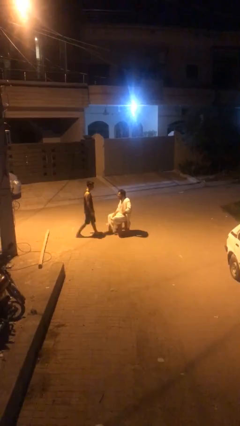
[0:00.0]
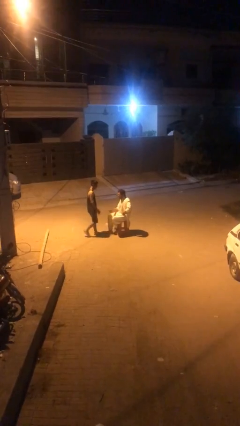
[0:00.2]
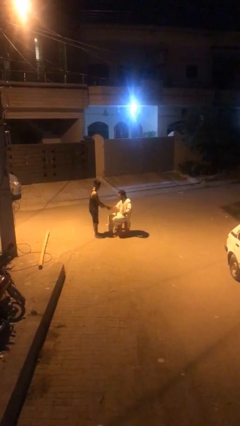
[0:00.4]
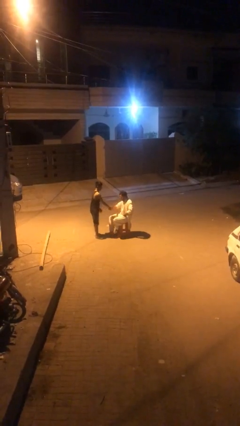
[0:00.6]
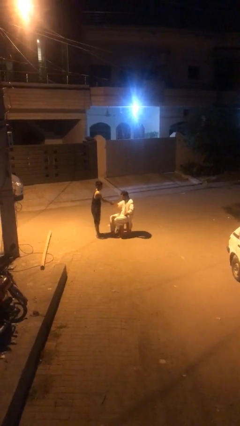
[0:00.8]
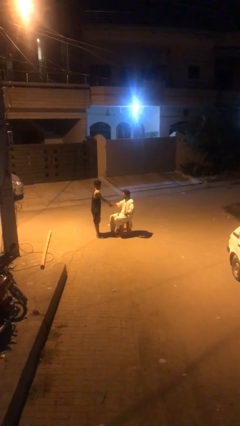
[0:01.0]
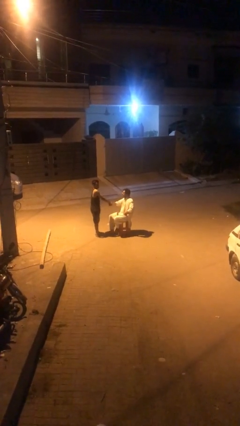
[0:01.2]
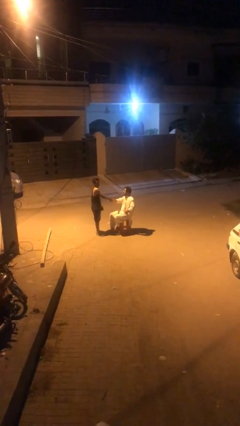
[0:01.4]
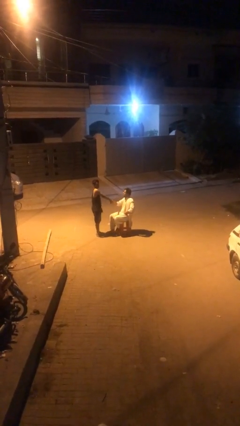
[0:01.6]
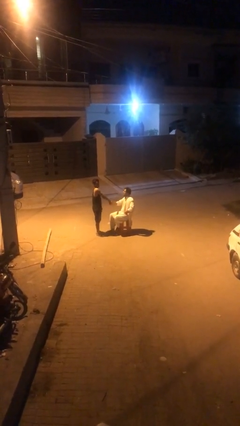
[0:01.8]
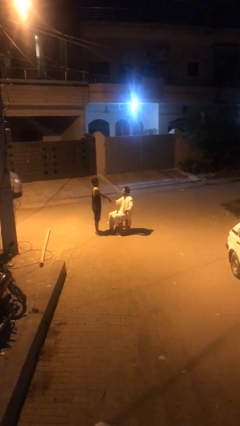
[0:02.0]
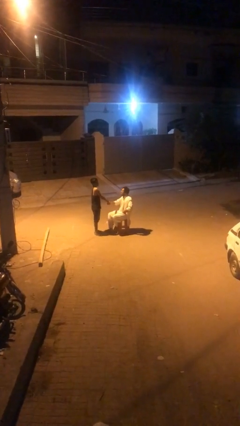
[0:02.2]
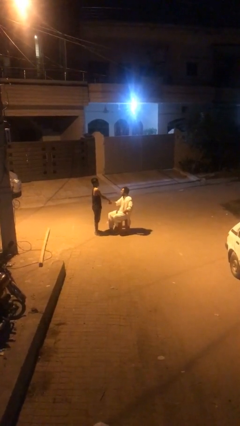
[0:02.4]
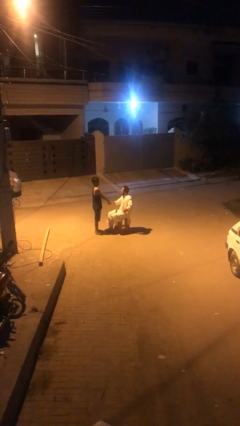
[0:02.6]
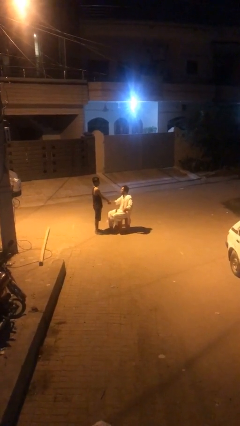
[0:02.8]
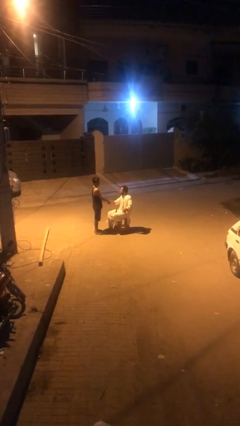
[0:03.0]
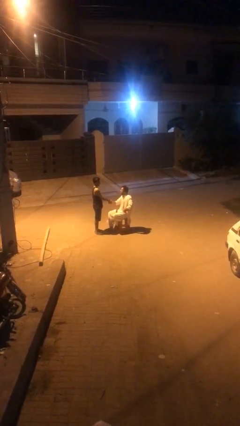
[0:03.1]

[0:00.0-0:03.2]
person shakes hand

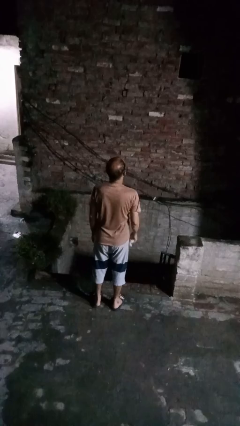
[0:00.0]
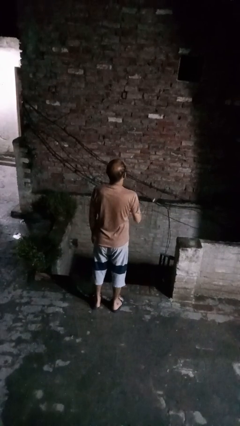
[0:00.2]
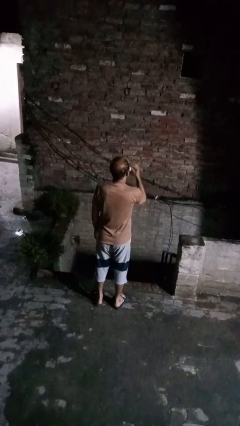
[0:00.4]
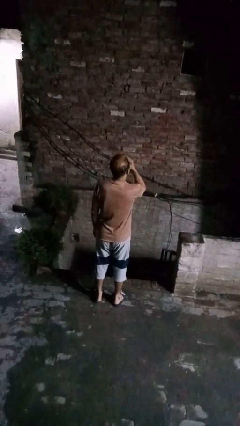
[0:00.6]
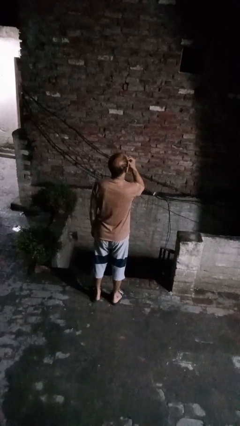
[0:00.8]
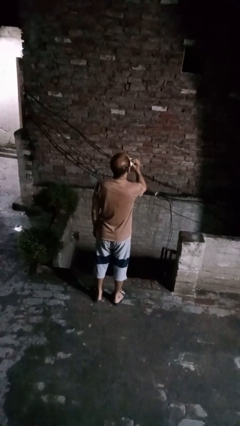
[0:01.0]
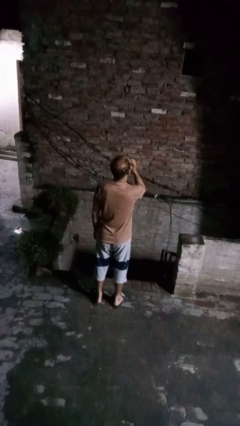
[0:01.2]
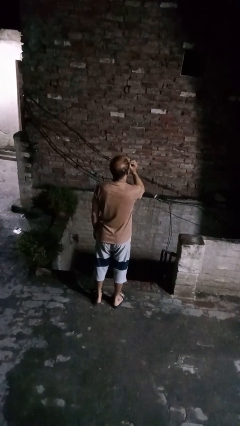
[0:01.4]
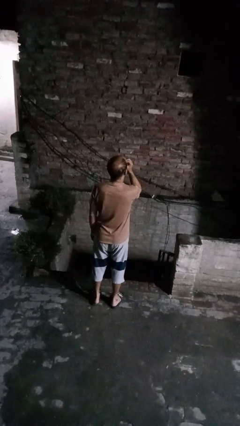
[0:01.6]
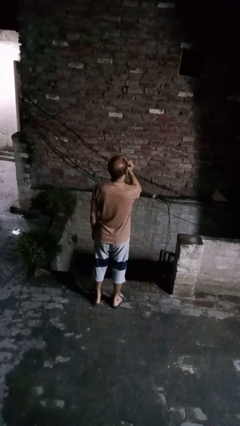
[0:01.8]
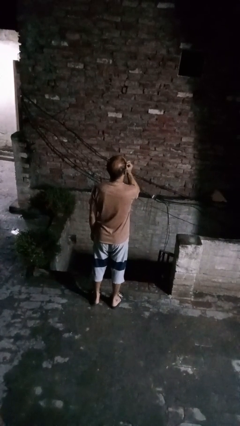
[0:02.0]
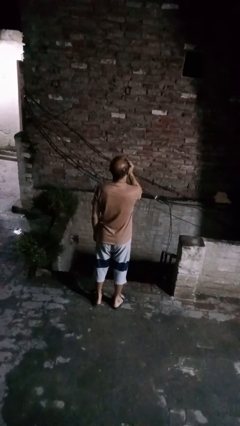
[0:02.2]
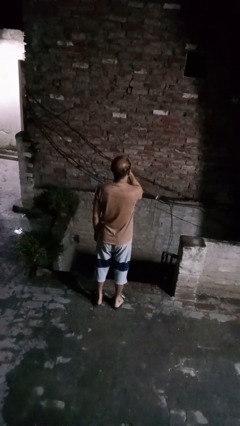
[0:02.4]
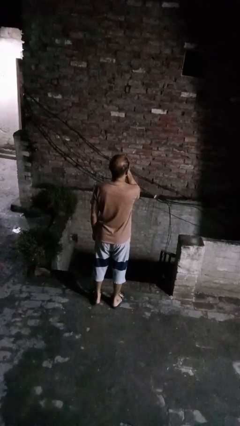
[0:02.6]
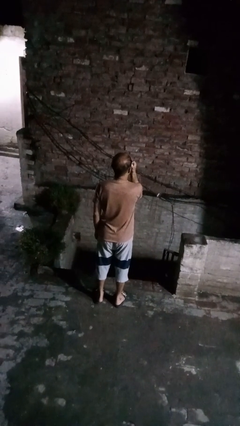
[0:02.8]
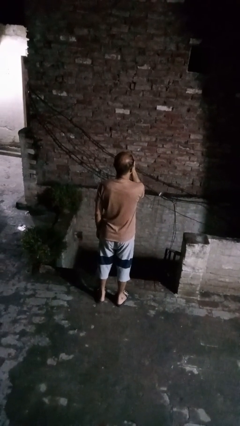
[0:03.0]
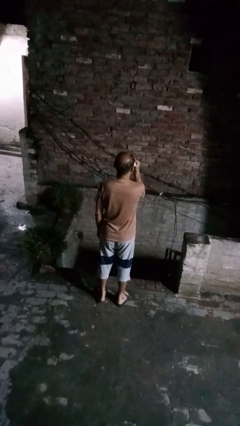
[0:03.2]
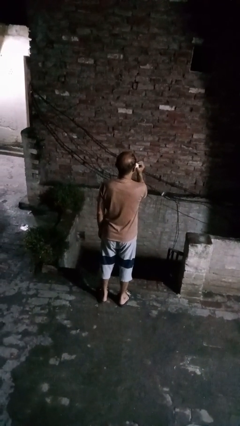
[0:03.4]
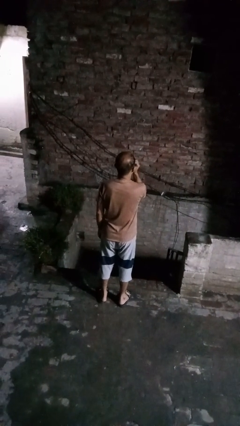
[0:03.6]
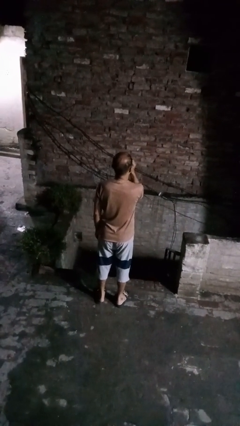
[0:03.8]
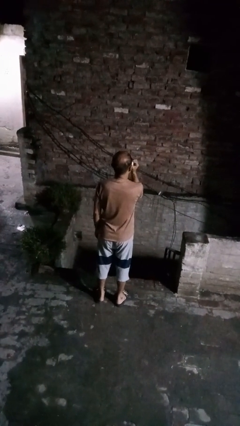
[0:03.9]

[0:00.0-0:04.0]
person blows nose

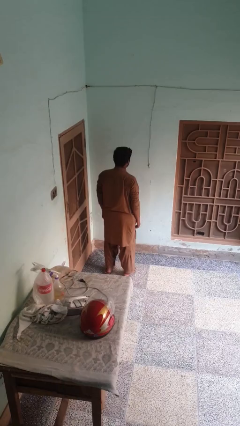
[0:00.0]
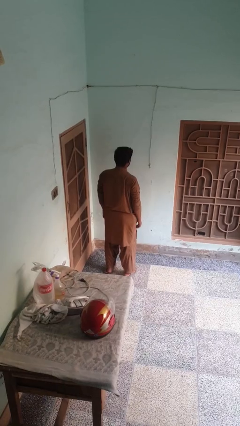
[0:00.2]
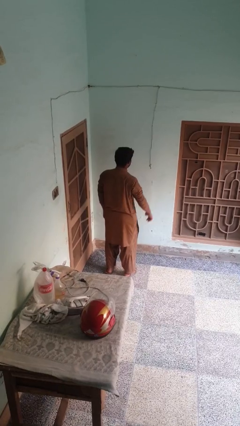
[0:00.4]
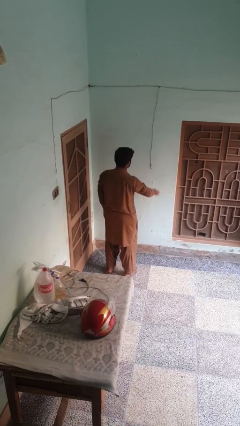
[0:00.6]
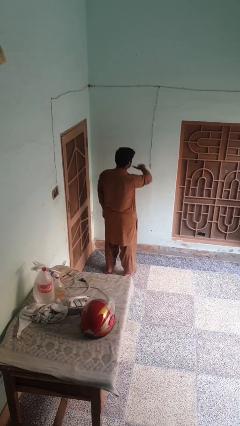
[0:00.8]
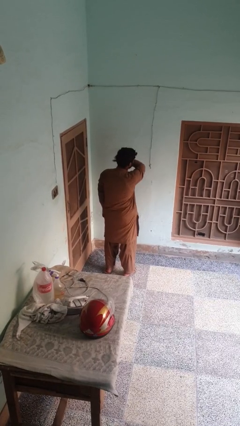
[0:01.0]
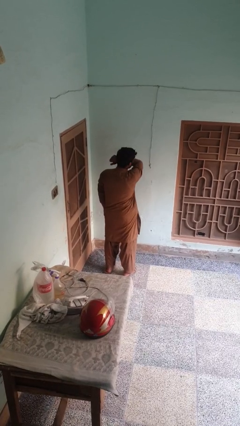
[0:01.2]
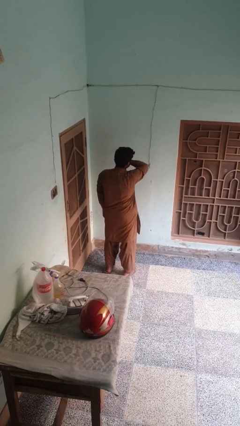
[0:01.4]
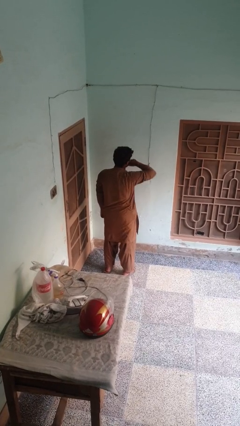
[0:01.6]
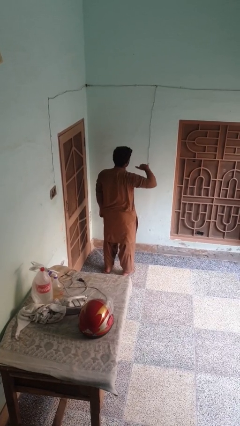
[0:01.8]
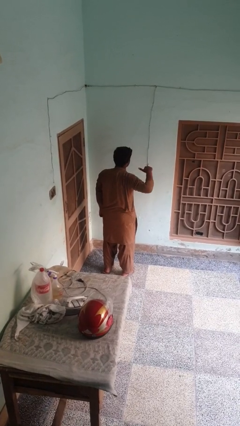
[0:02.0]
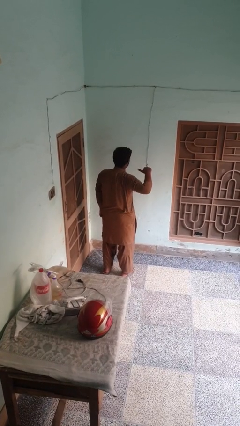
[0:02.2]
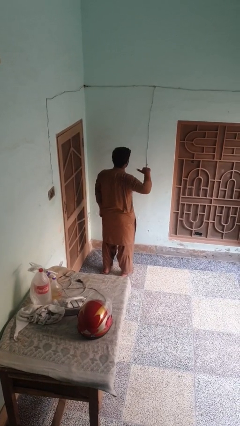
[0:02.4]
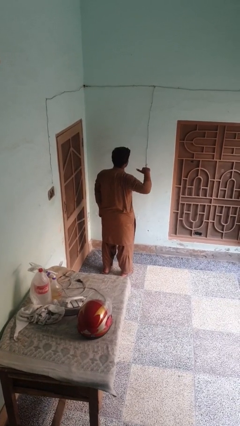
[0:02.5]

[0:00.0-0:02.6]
person gestures cut

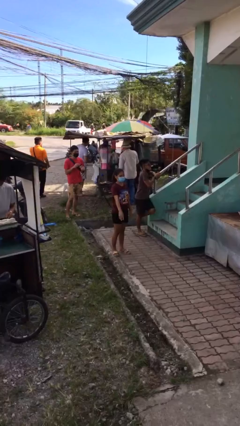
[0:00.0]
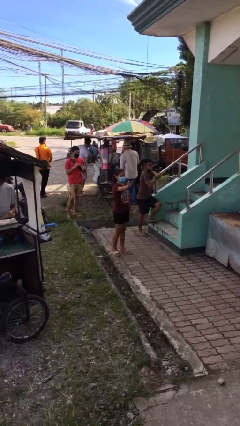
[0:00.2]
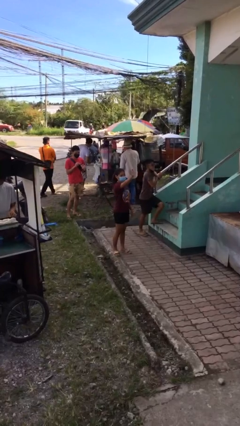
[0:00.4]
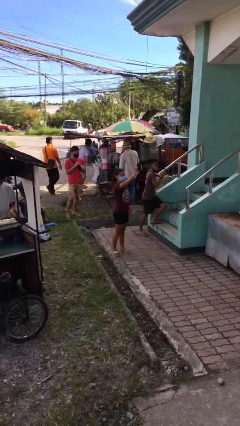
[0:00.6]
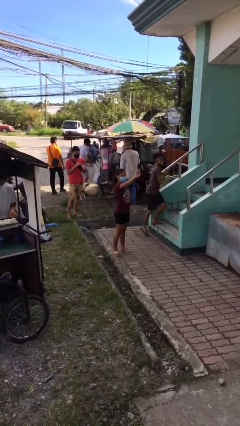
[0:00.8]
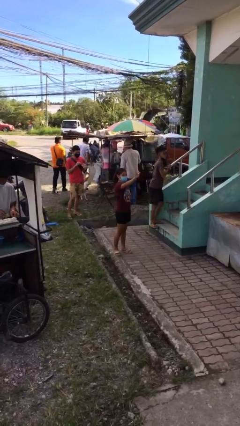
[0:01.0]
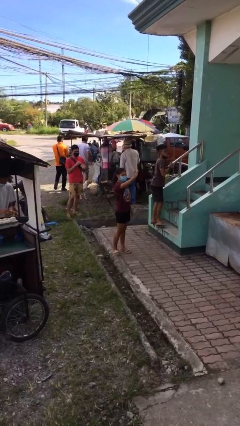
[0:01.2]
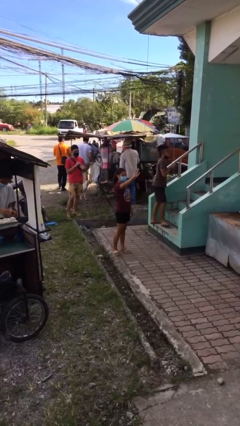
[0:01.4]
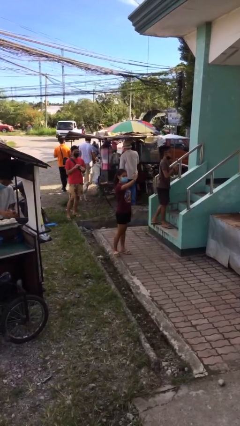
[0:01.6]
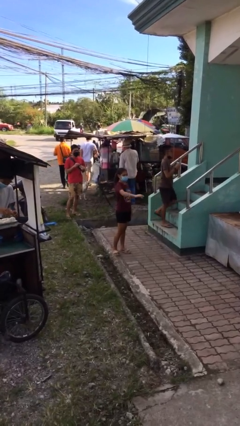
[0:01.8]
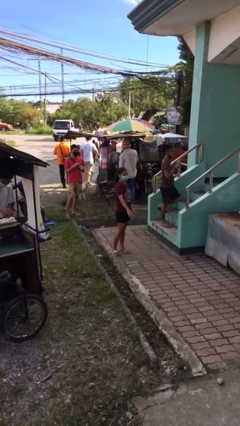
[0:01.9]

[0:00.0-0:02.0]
person waves at person

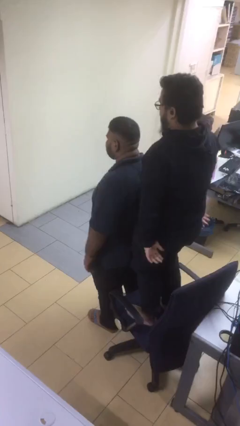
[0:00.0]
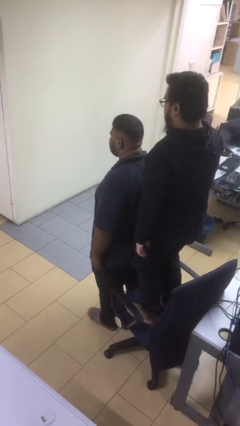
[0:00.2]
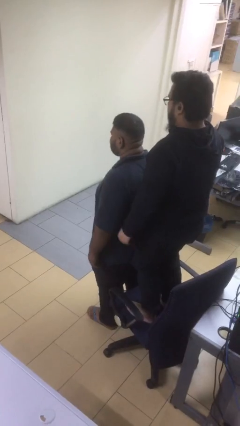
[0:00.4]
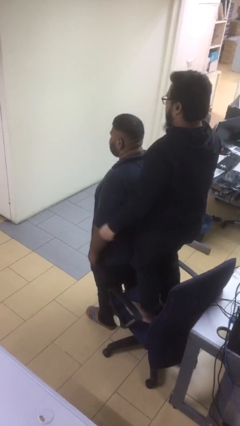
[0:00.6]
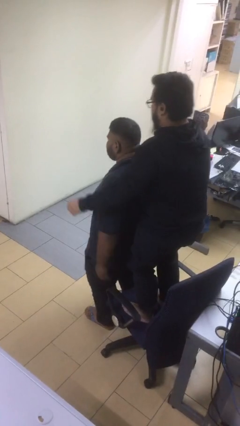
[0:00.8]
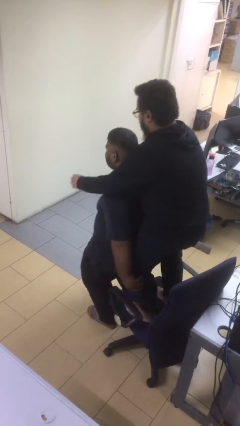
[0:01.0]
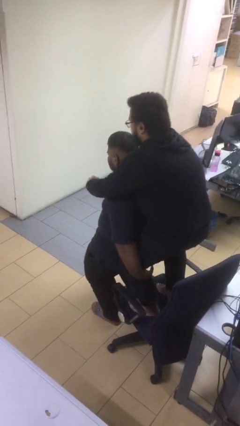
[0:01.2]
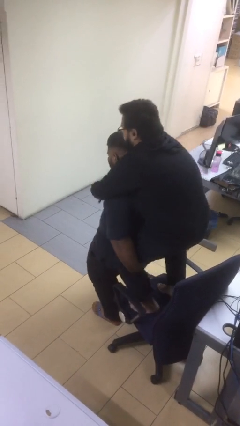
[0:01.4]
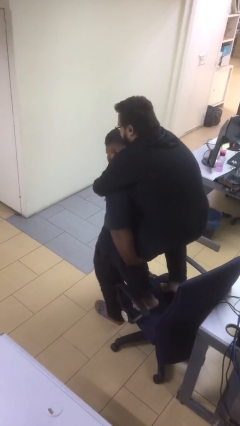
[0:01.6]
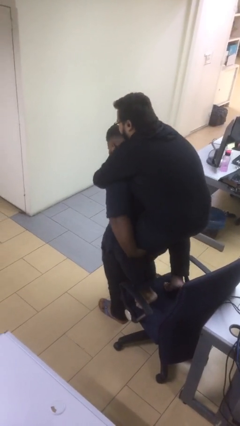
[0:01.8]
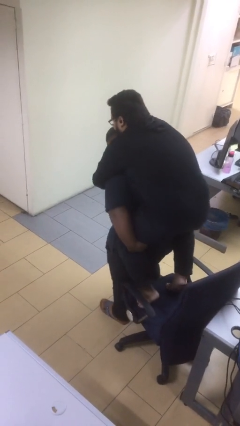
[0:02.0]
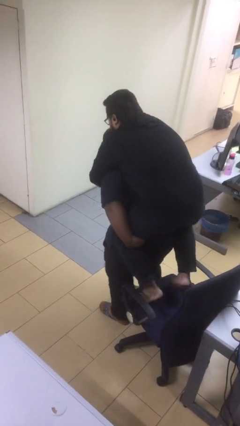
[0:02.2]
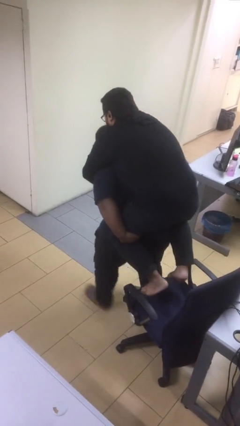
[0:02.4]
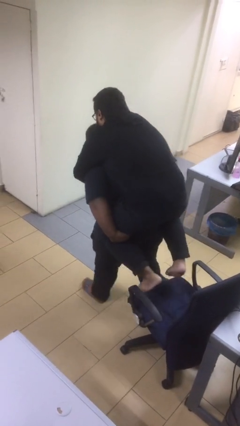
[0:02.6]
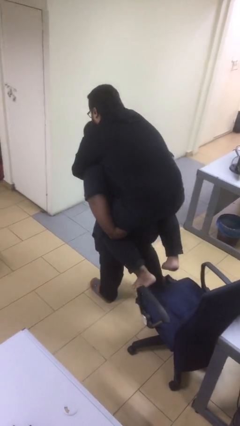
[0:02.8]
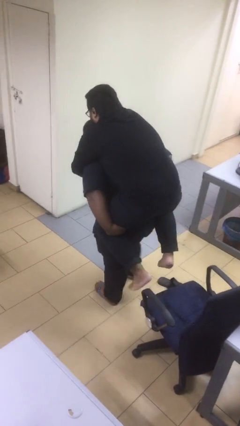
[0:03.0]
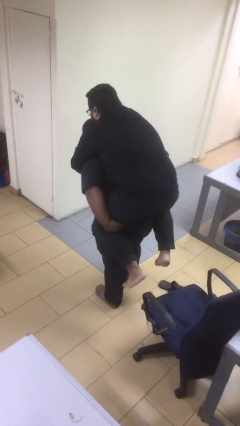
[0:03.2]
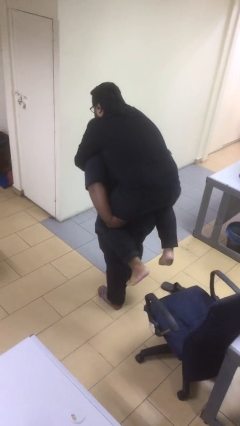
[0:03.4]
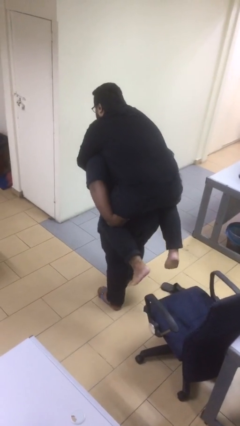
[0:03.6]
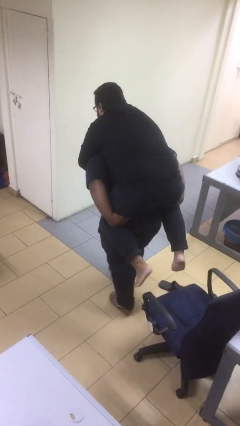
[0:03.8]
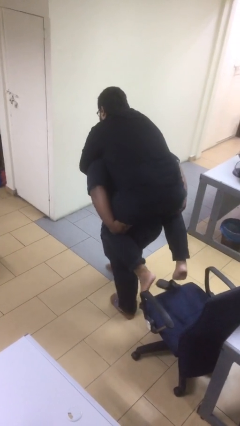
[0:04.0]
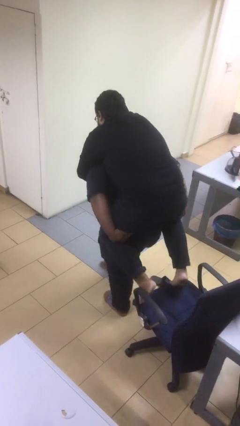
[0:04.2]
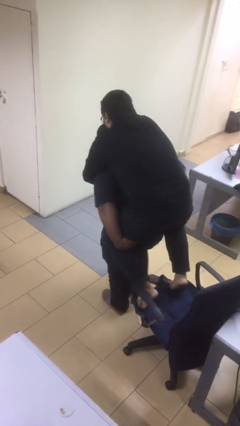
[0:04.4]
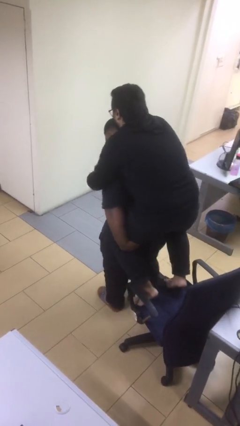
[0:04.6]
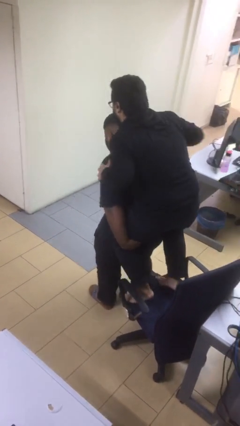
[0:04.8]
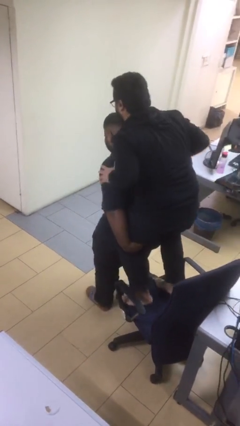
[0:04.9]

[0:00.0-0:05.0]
person carries person on back

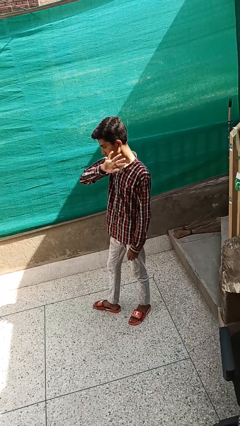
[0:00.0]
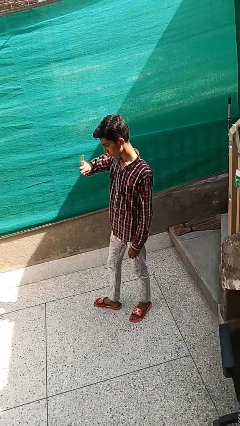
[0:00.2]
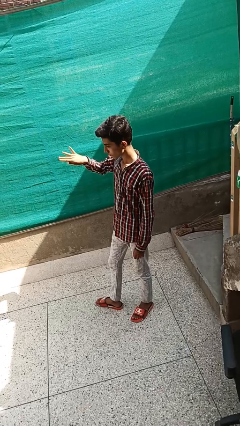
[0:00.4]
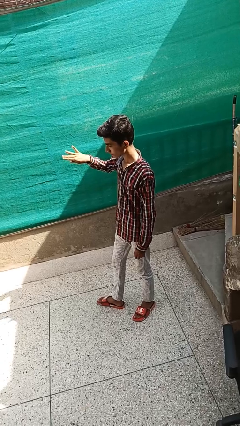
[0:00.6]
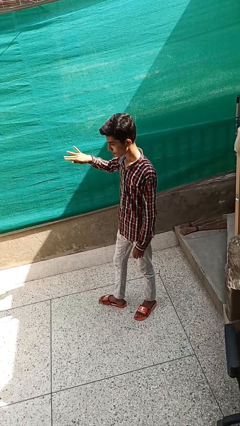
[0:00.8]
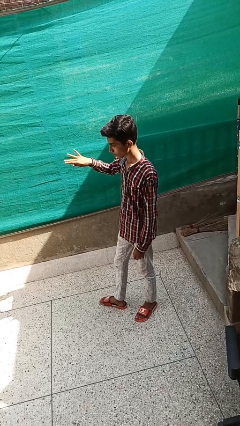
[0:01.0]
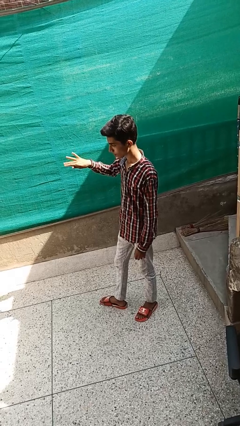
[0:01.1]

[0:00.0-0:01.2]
person gestures swipe right
